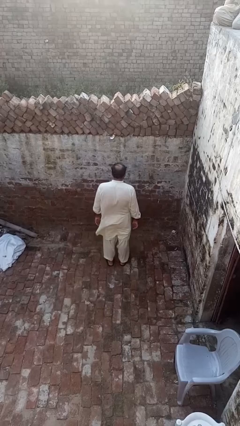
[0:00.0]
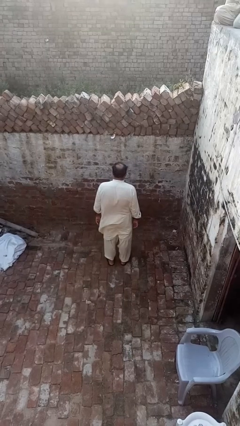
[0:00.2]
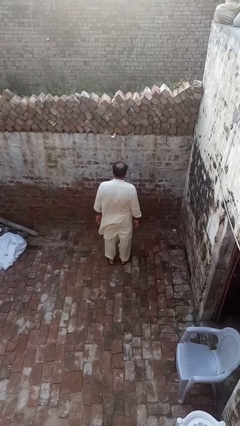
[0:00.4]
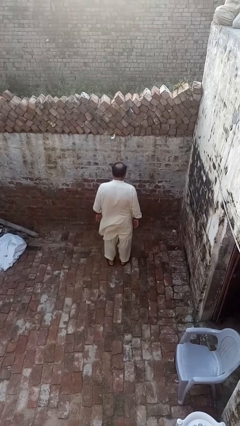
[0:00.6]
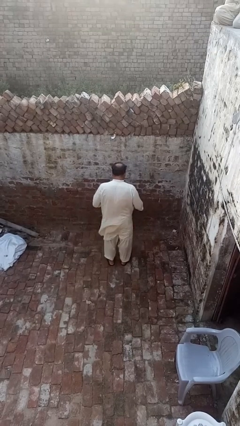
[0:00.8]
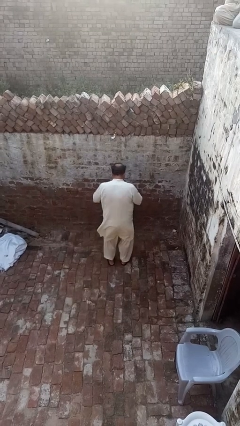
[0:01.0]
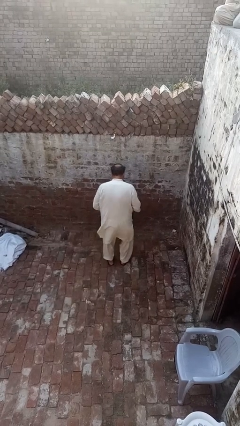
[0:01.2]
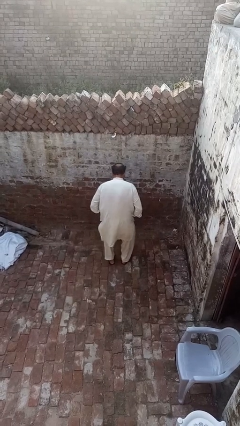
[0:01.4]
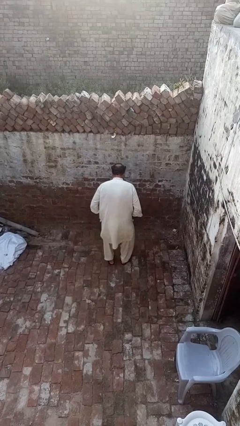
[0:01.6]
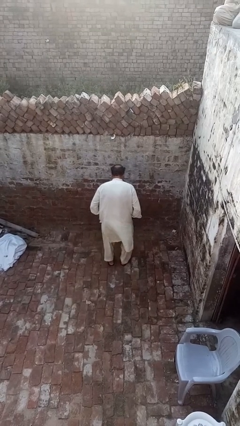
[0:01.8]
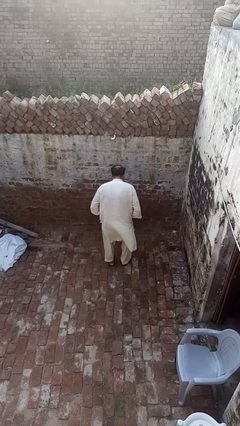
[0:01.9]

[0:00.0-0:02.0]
person slaps hands on thighs

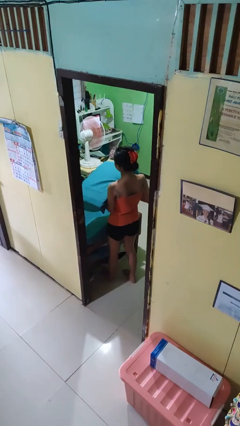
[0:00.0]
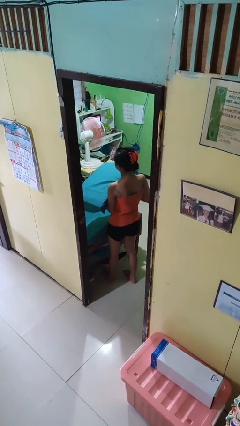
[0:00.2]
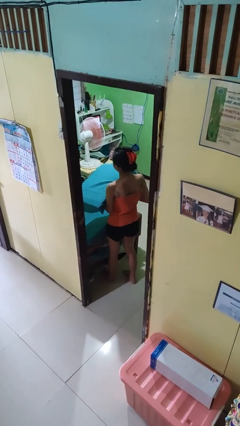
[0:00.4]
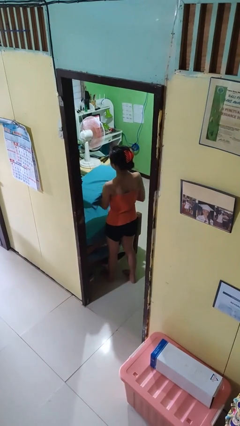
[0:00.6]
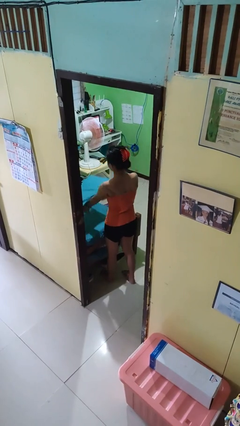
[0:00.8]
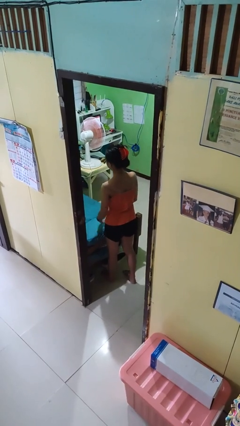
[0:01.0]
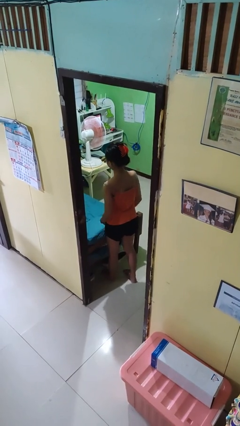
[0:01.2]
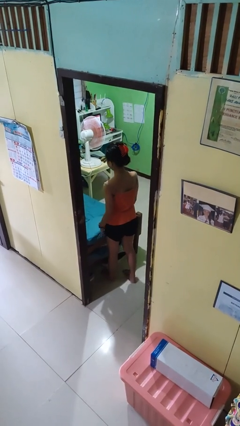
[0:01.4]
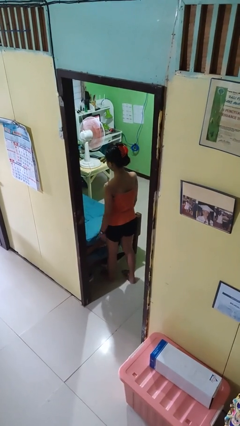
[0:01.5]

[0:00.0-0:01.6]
person puts down object on bed

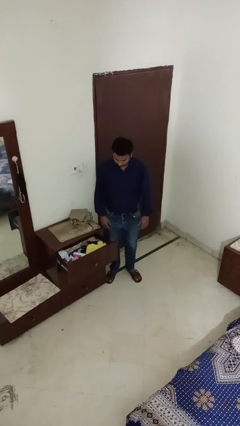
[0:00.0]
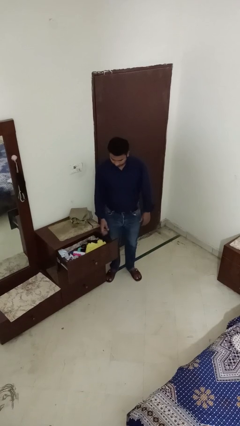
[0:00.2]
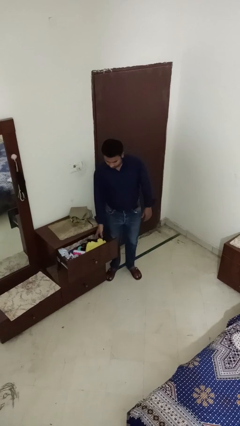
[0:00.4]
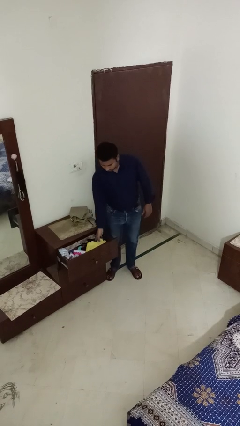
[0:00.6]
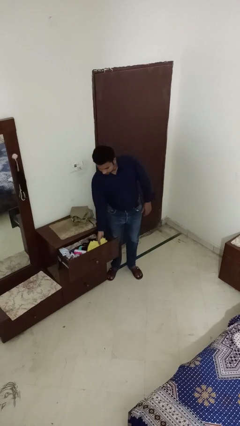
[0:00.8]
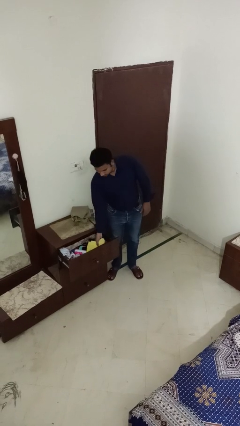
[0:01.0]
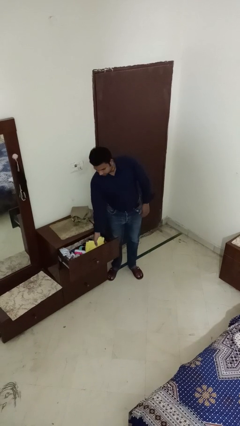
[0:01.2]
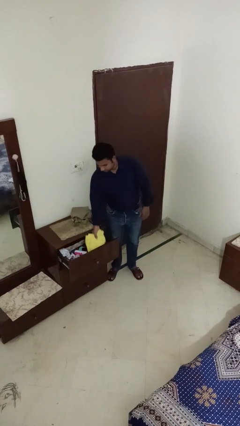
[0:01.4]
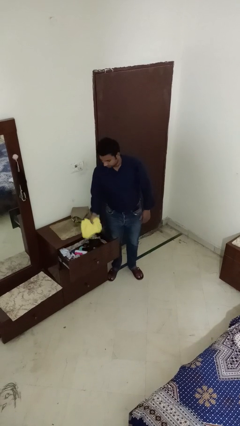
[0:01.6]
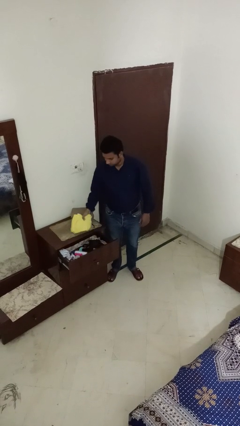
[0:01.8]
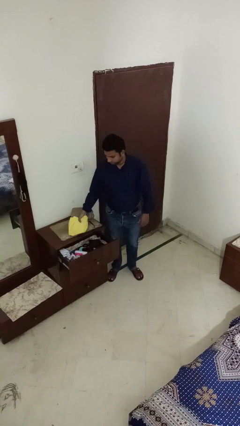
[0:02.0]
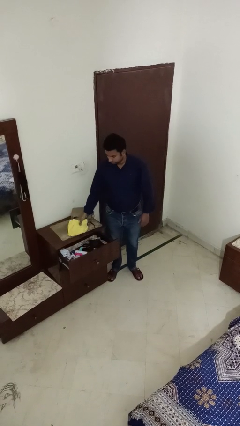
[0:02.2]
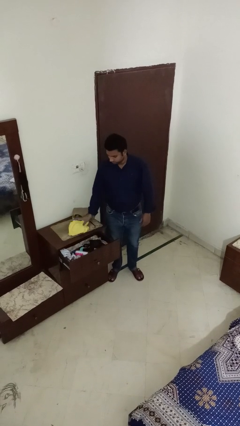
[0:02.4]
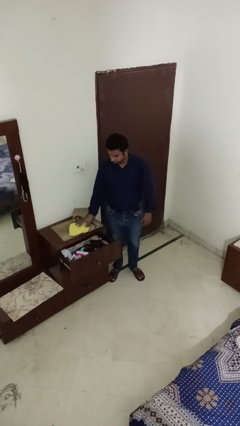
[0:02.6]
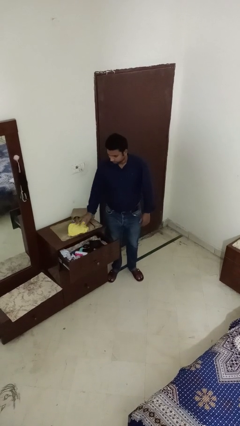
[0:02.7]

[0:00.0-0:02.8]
person takes clothes from dresser

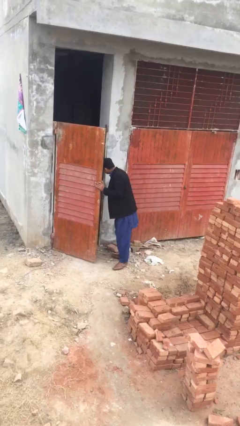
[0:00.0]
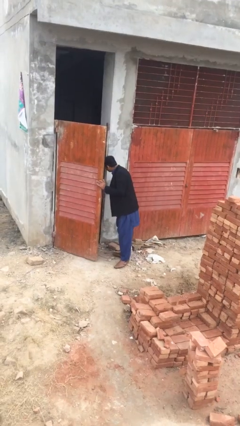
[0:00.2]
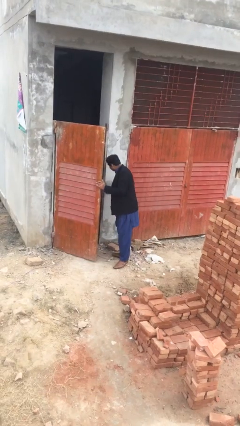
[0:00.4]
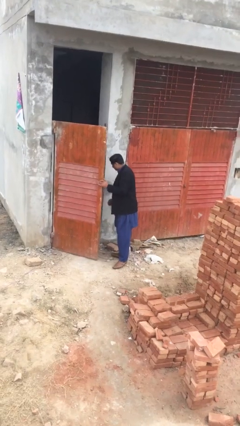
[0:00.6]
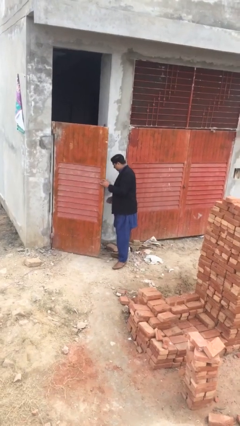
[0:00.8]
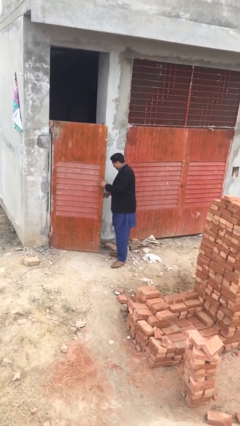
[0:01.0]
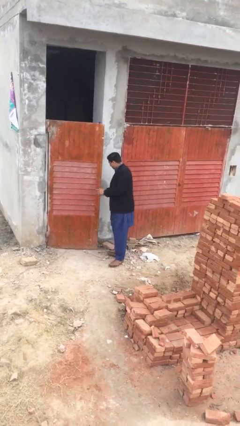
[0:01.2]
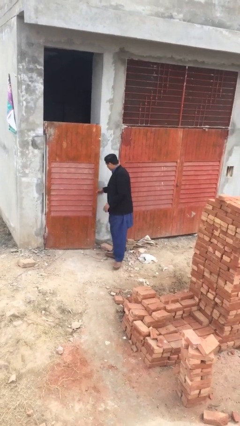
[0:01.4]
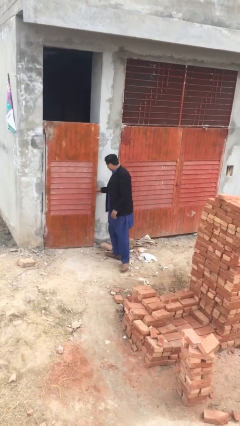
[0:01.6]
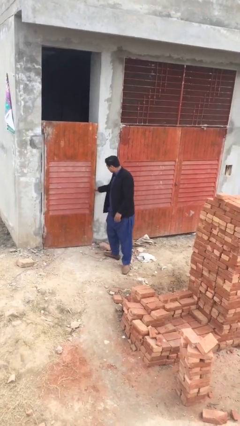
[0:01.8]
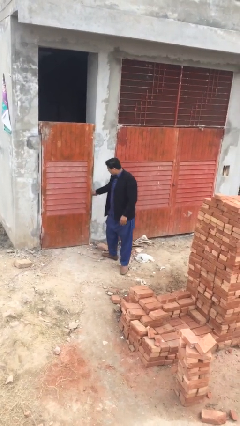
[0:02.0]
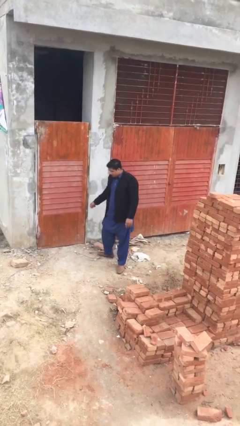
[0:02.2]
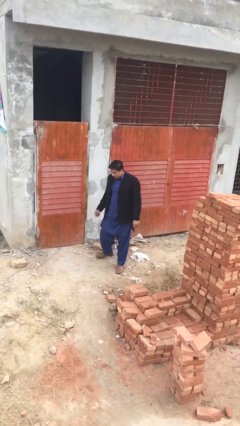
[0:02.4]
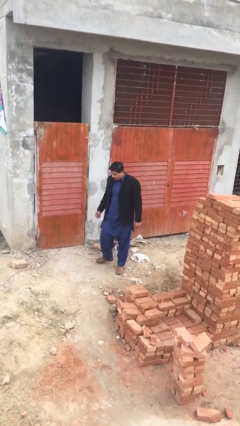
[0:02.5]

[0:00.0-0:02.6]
person closes facility door

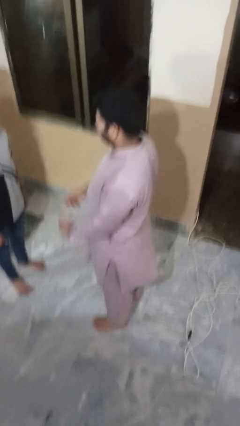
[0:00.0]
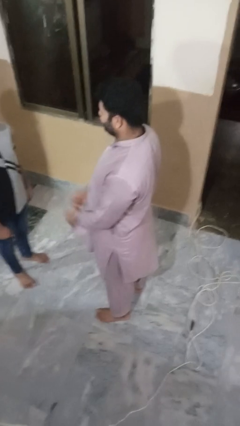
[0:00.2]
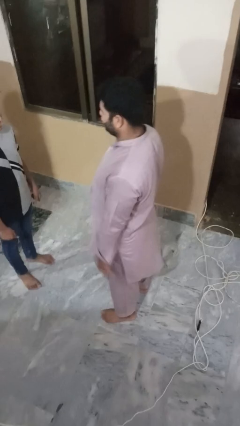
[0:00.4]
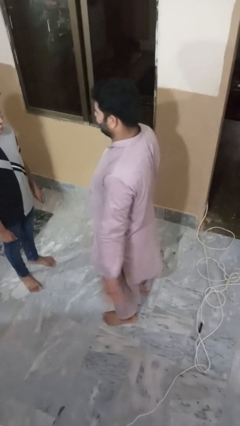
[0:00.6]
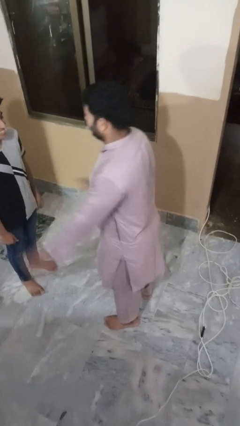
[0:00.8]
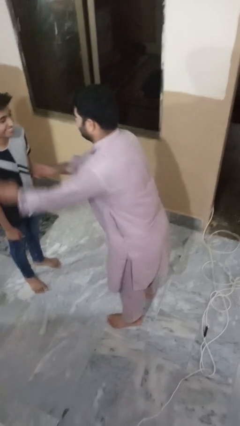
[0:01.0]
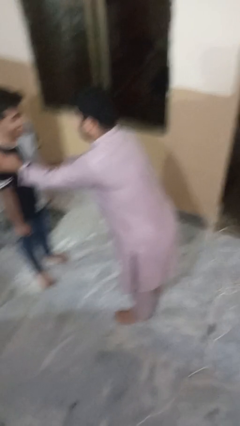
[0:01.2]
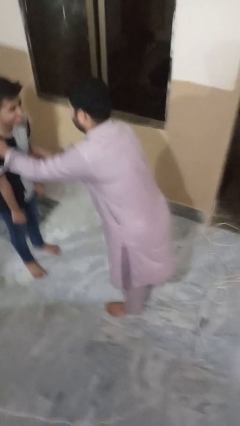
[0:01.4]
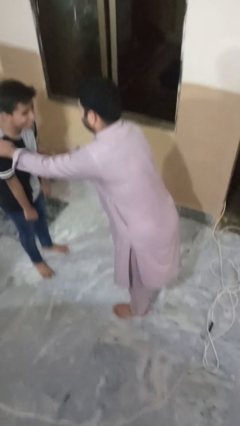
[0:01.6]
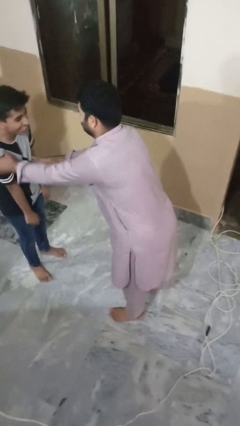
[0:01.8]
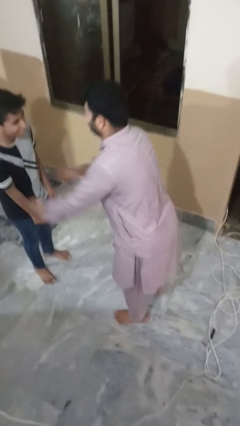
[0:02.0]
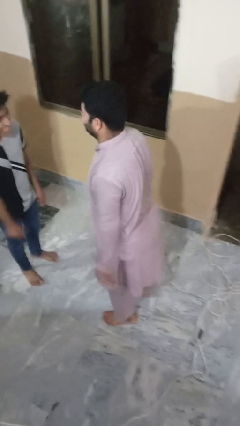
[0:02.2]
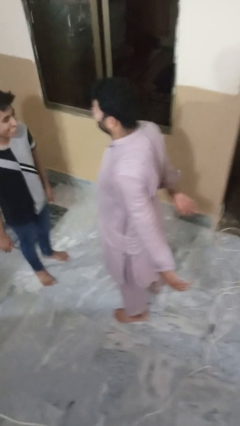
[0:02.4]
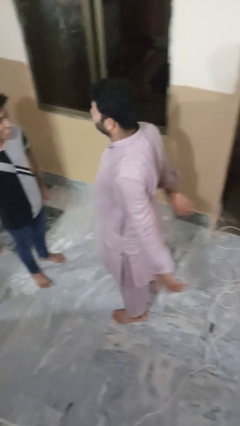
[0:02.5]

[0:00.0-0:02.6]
person tickles person

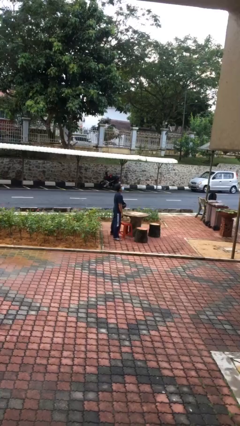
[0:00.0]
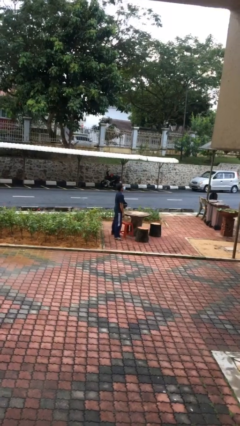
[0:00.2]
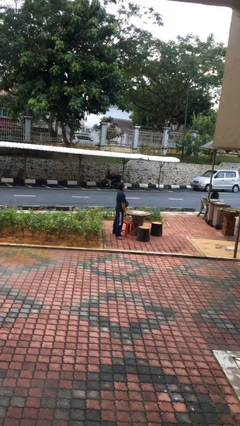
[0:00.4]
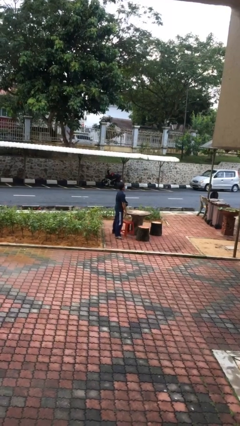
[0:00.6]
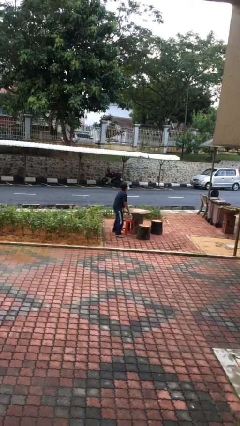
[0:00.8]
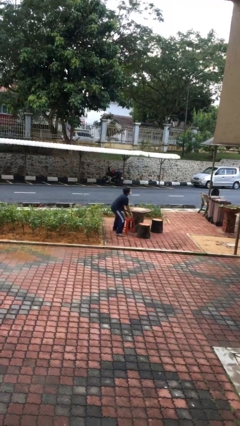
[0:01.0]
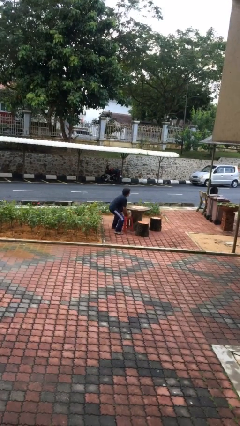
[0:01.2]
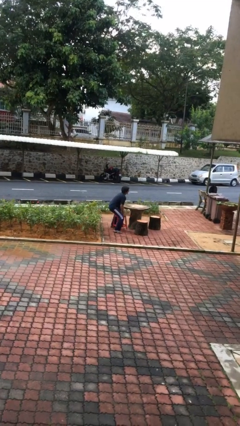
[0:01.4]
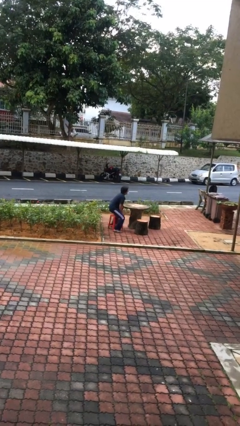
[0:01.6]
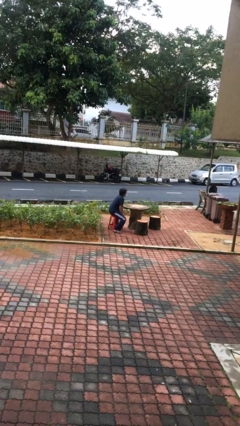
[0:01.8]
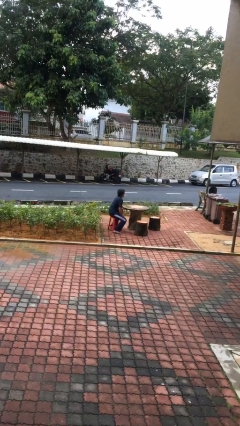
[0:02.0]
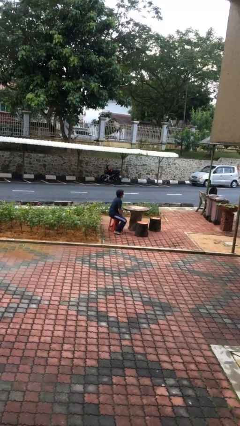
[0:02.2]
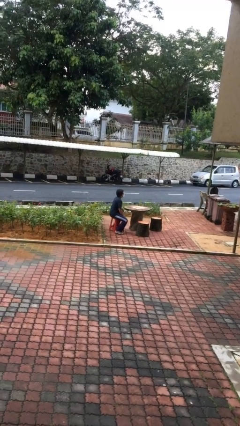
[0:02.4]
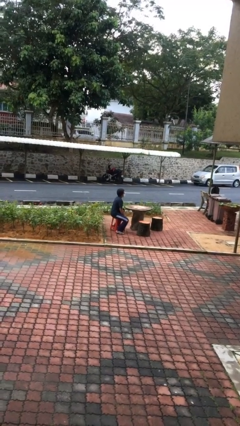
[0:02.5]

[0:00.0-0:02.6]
person sits down

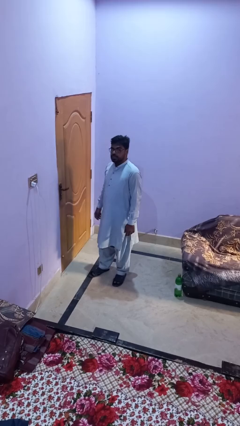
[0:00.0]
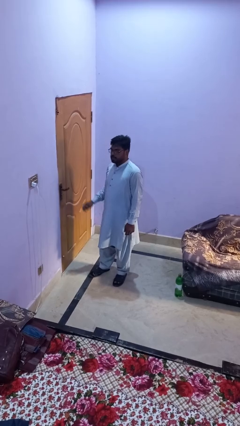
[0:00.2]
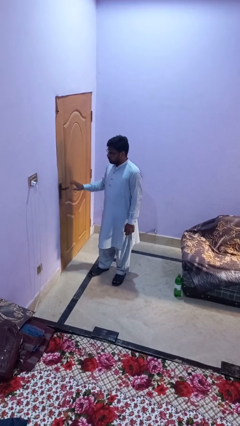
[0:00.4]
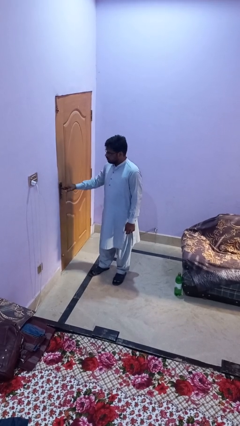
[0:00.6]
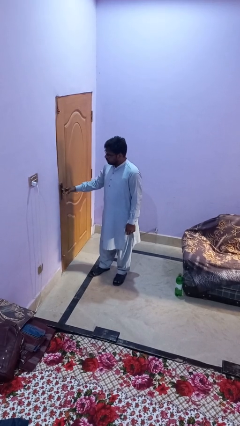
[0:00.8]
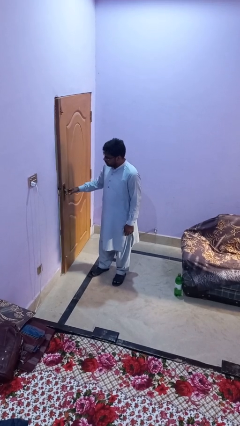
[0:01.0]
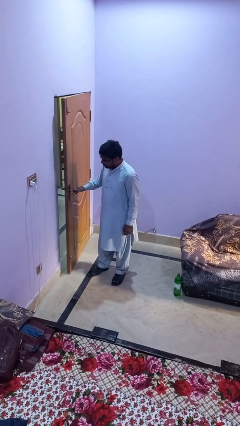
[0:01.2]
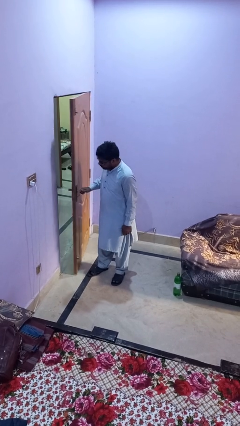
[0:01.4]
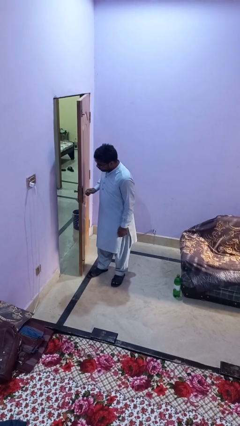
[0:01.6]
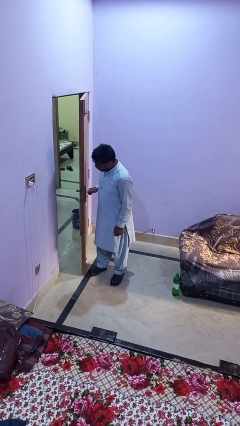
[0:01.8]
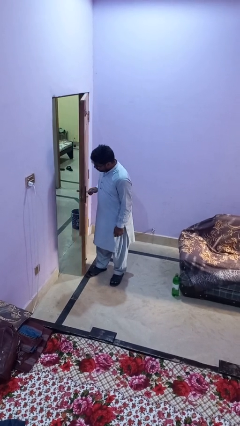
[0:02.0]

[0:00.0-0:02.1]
person opens facility door

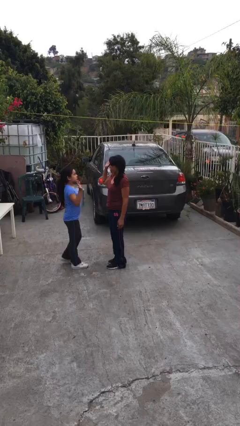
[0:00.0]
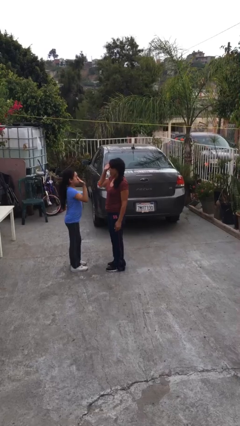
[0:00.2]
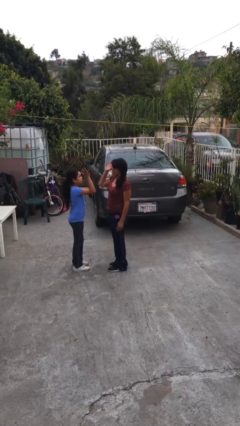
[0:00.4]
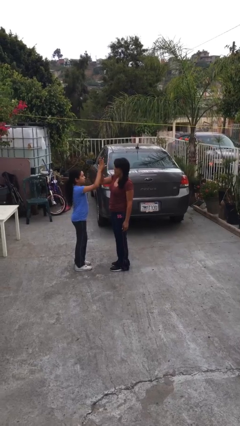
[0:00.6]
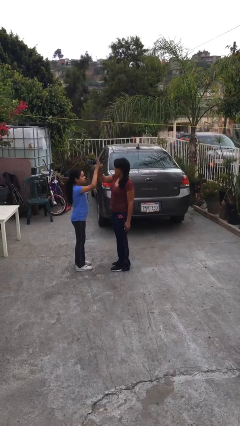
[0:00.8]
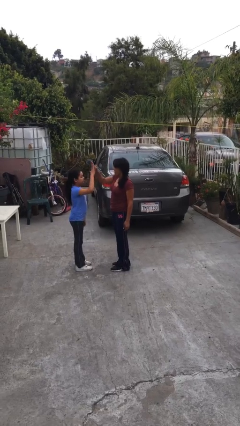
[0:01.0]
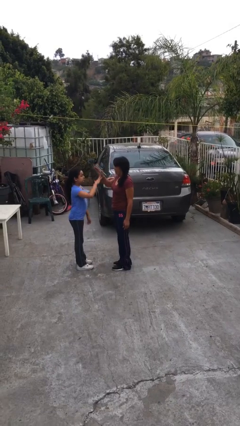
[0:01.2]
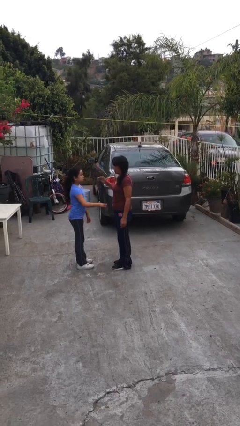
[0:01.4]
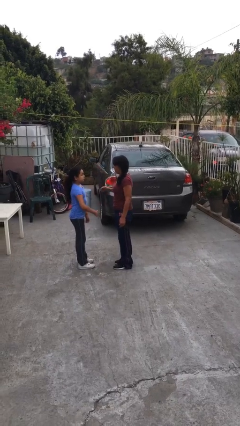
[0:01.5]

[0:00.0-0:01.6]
person highfives hand
